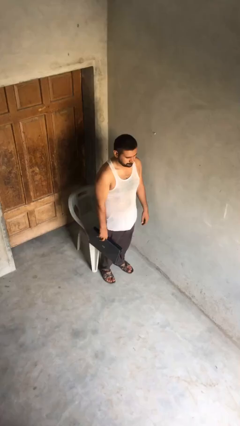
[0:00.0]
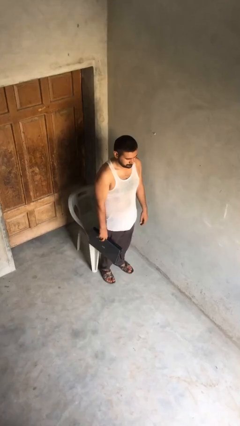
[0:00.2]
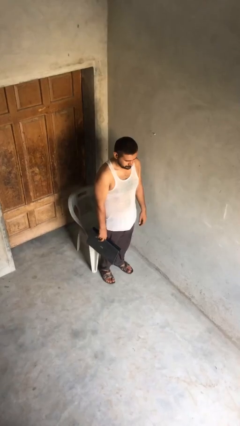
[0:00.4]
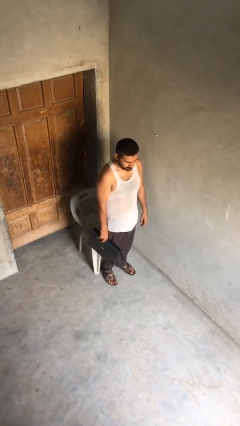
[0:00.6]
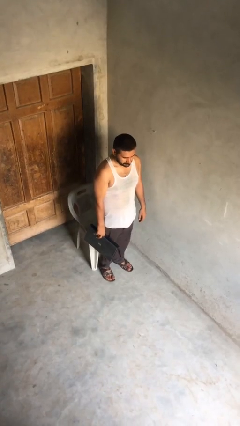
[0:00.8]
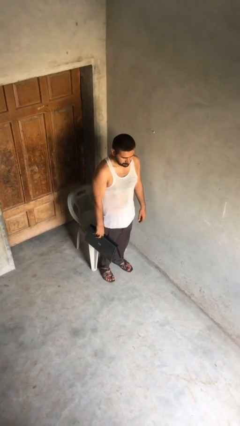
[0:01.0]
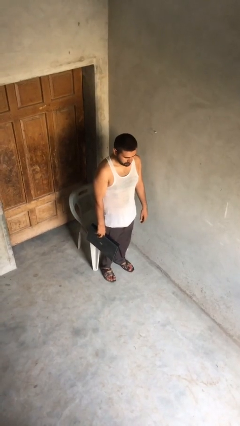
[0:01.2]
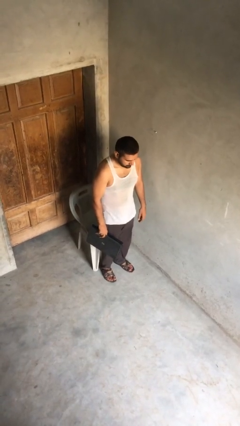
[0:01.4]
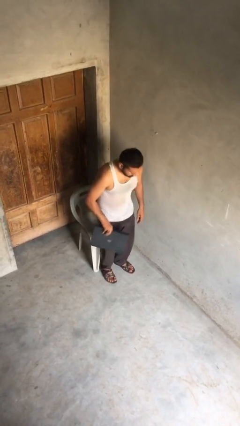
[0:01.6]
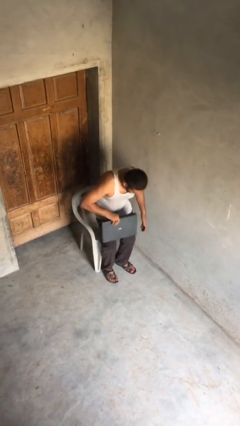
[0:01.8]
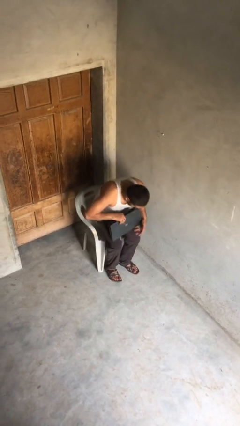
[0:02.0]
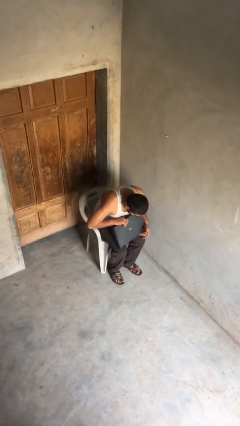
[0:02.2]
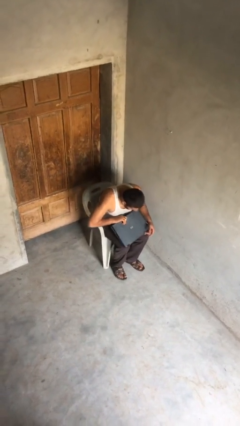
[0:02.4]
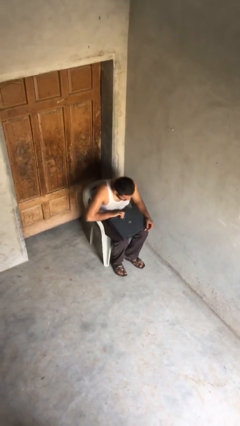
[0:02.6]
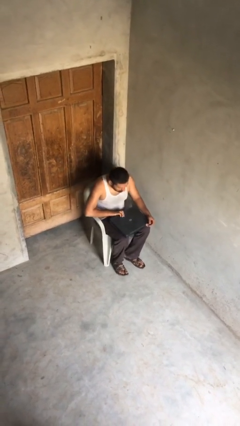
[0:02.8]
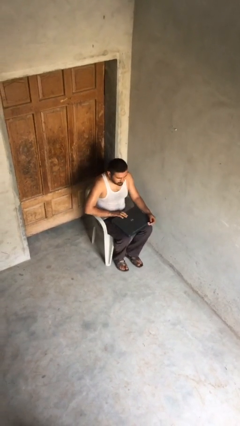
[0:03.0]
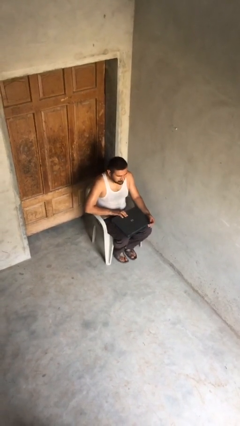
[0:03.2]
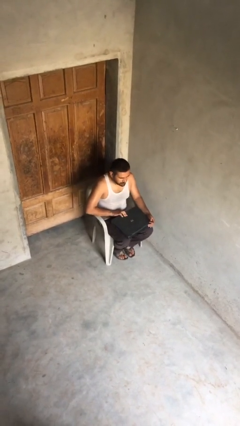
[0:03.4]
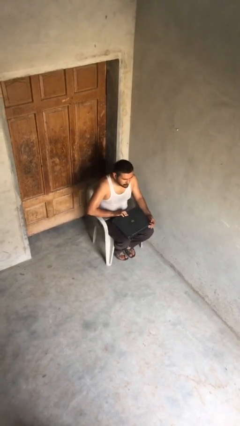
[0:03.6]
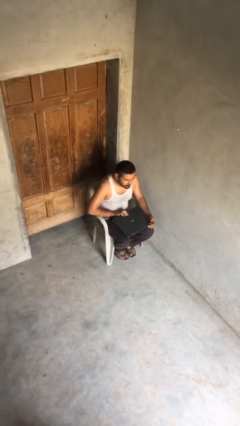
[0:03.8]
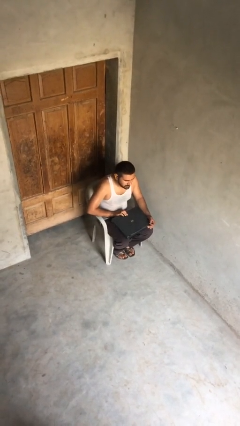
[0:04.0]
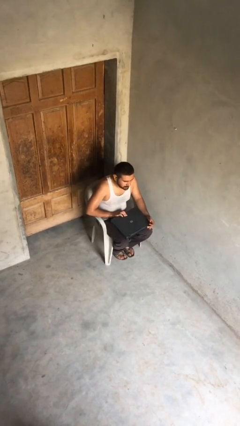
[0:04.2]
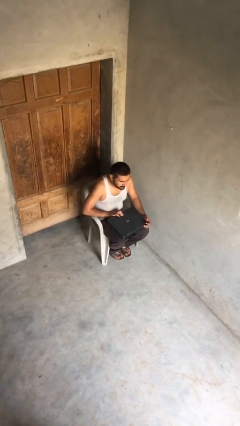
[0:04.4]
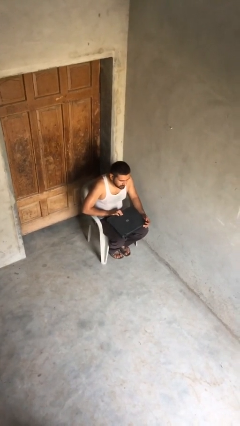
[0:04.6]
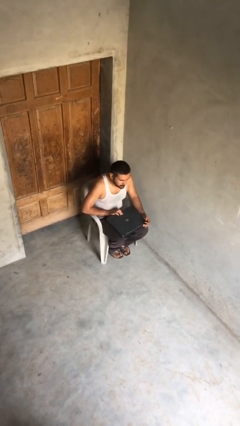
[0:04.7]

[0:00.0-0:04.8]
person sits down

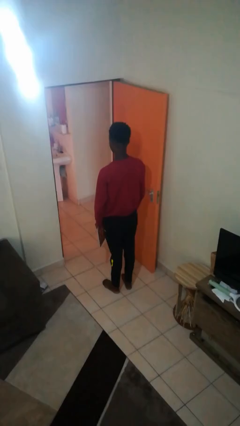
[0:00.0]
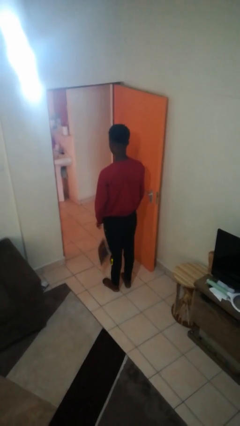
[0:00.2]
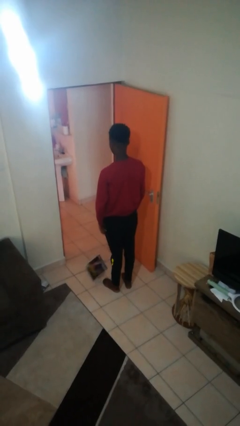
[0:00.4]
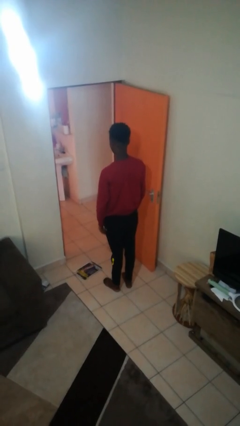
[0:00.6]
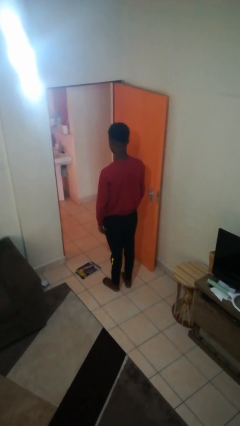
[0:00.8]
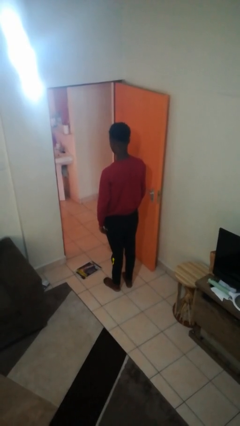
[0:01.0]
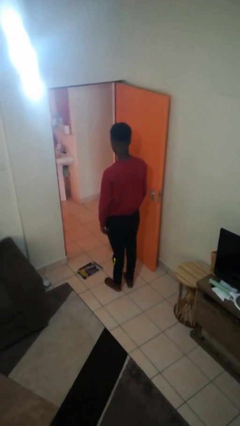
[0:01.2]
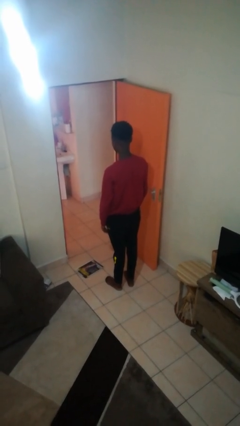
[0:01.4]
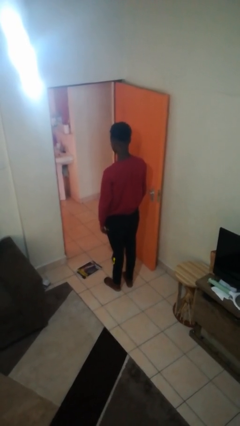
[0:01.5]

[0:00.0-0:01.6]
person drops object

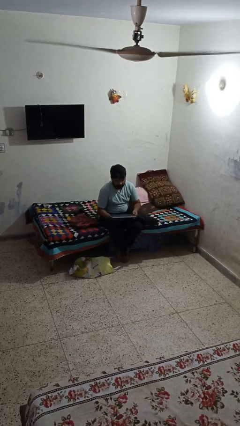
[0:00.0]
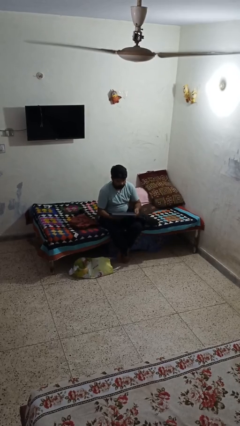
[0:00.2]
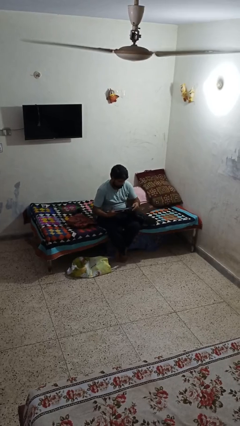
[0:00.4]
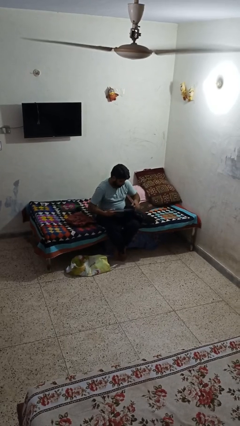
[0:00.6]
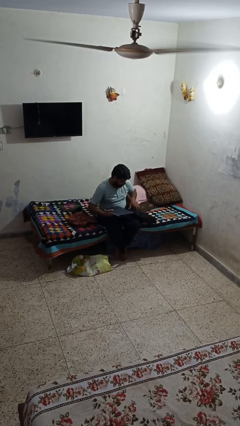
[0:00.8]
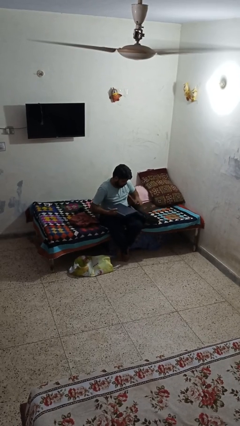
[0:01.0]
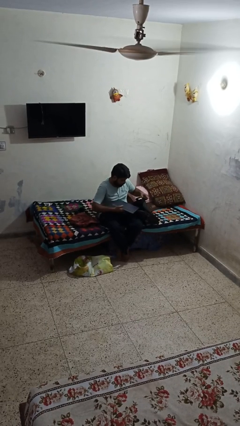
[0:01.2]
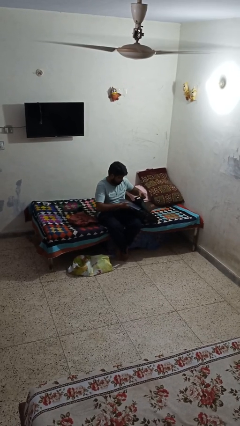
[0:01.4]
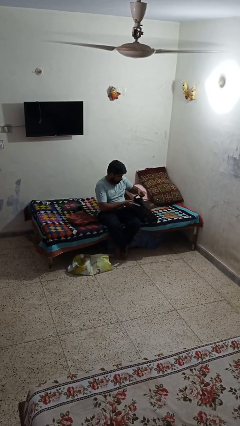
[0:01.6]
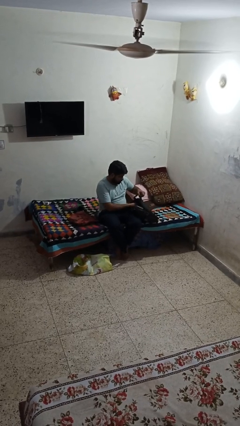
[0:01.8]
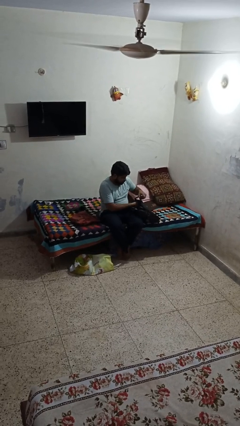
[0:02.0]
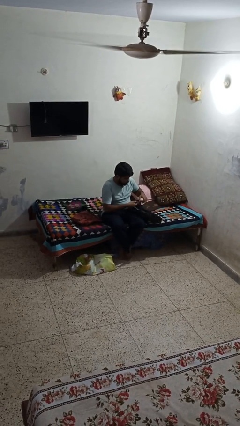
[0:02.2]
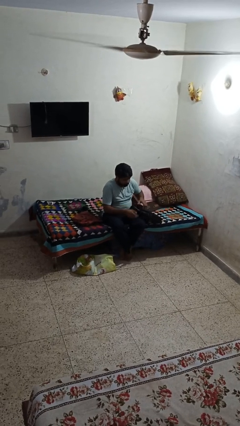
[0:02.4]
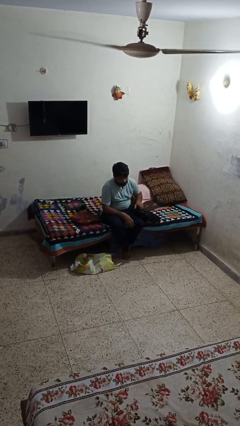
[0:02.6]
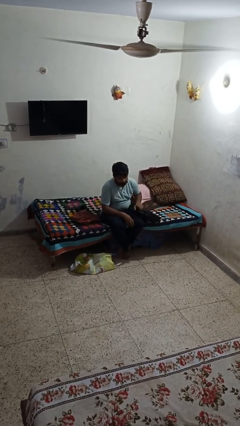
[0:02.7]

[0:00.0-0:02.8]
person puts object into backpack

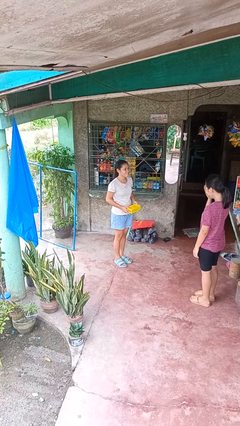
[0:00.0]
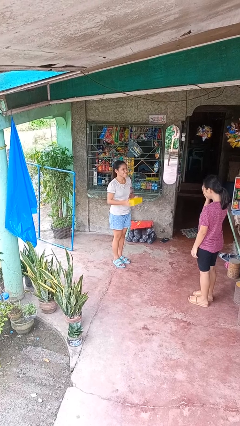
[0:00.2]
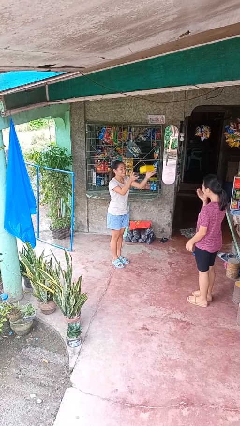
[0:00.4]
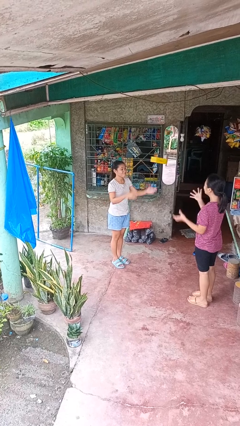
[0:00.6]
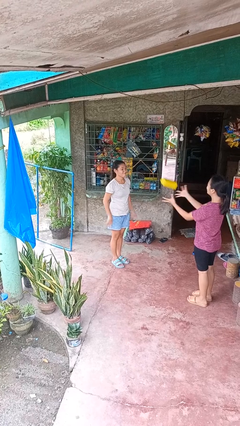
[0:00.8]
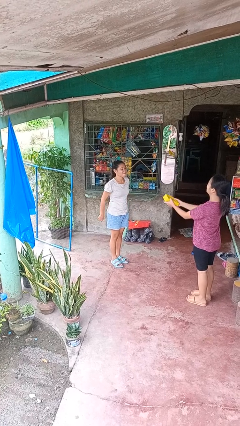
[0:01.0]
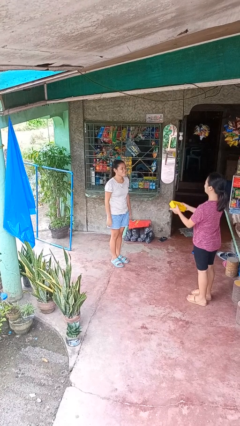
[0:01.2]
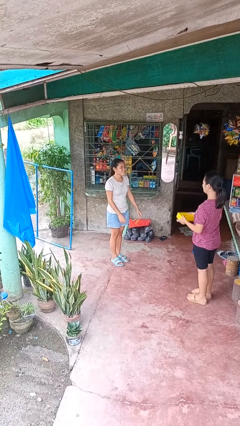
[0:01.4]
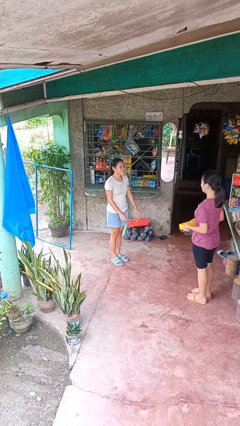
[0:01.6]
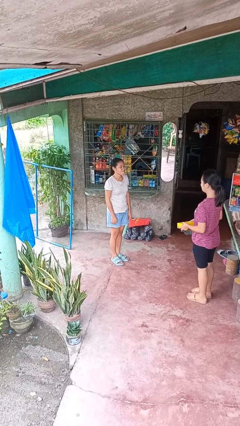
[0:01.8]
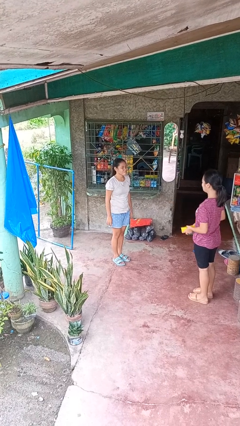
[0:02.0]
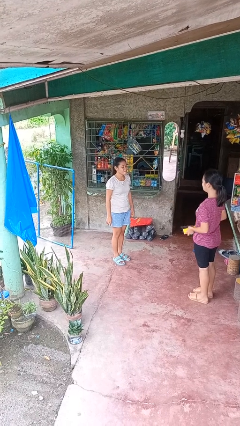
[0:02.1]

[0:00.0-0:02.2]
person throws object to person

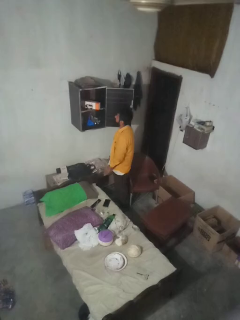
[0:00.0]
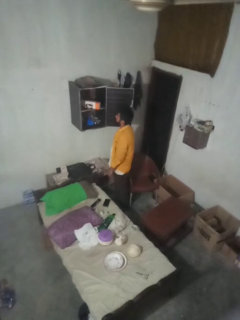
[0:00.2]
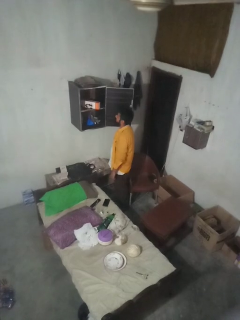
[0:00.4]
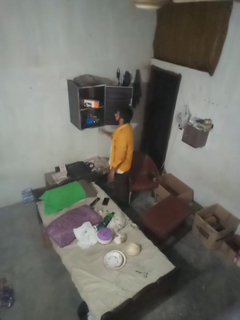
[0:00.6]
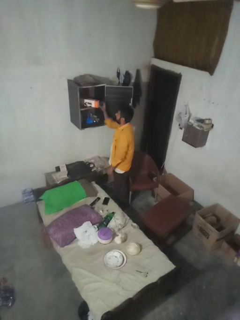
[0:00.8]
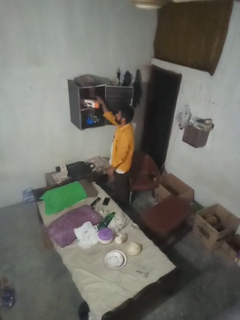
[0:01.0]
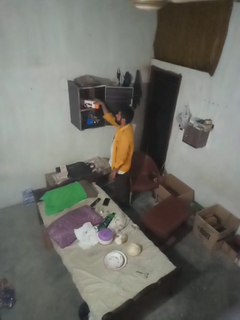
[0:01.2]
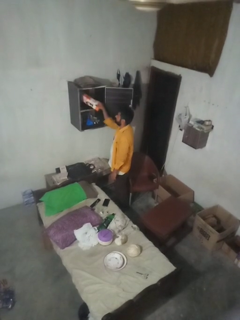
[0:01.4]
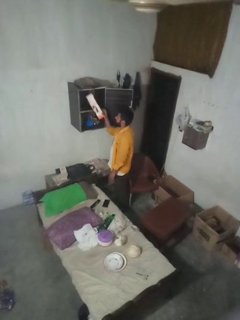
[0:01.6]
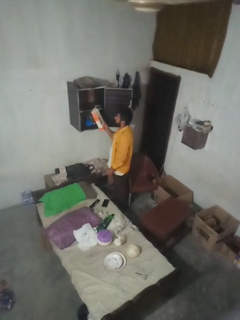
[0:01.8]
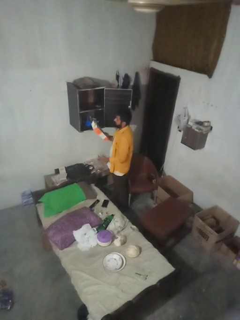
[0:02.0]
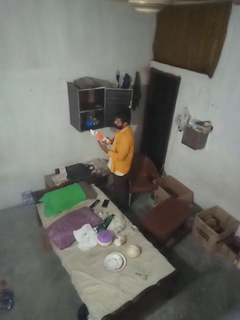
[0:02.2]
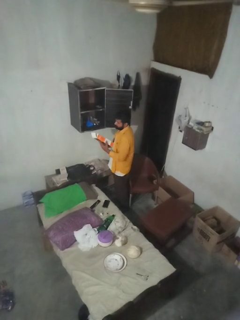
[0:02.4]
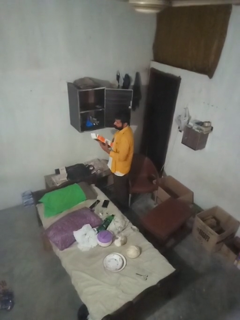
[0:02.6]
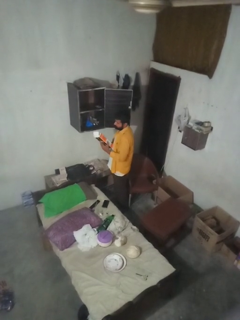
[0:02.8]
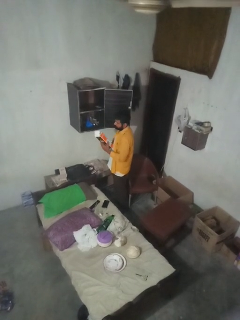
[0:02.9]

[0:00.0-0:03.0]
person picks up object from cabinet

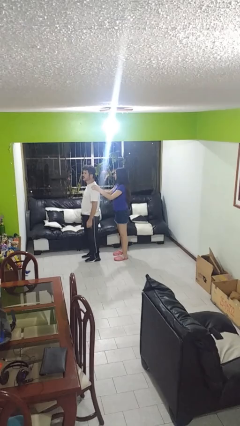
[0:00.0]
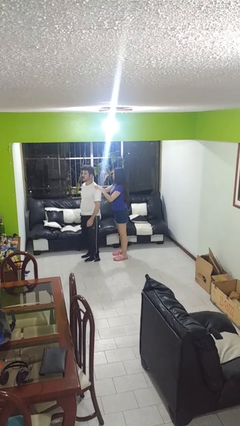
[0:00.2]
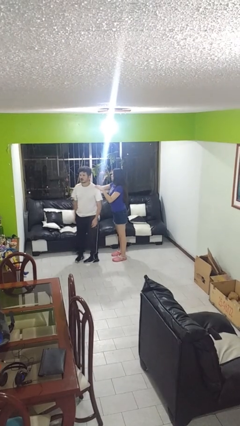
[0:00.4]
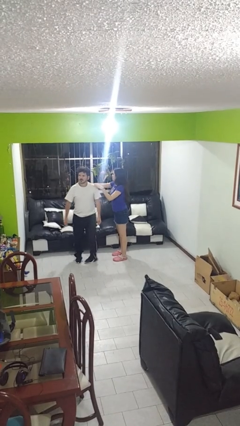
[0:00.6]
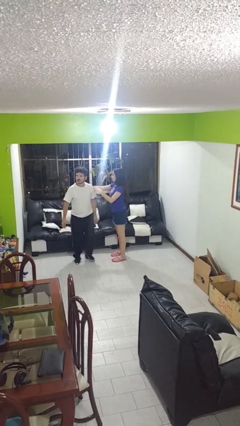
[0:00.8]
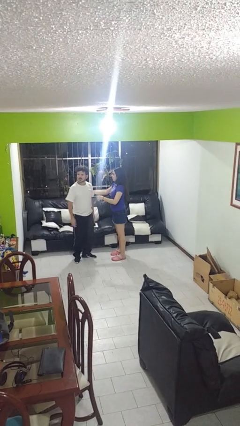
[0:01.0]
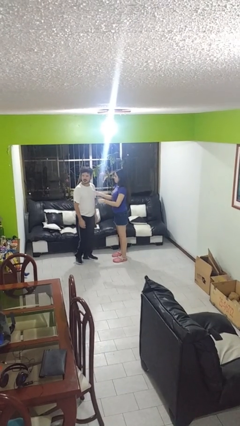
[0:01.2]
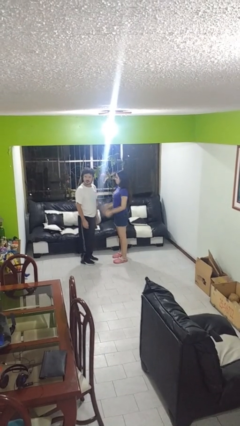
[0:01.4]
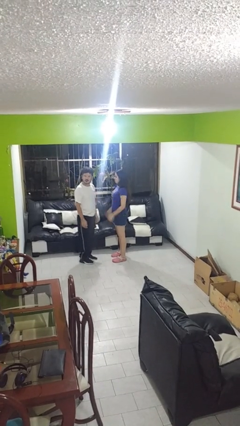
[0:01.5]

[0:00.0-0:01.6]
person spins person around

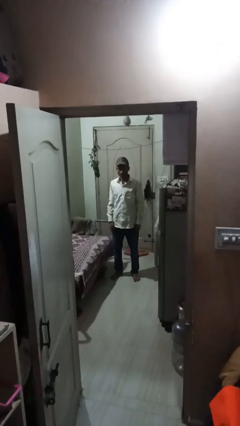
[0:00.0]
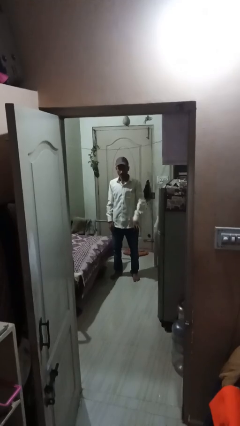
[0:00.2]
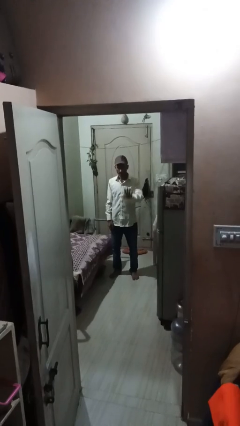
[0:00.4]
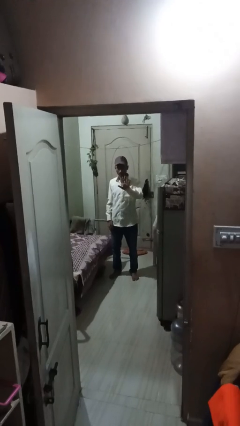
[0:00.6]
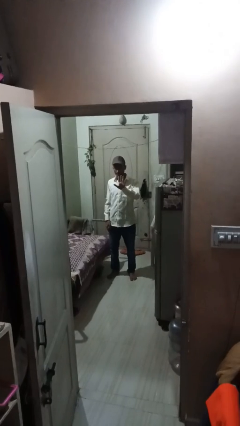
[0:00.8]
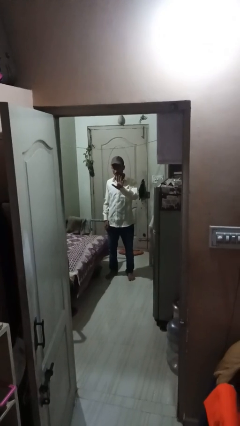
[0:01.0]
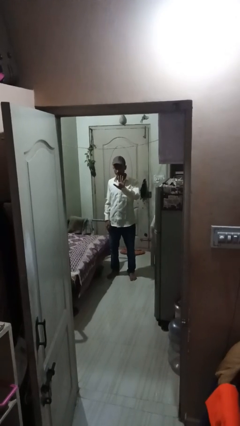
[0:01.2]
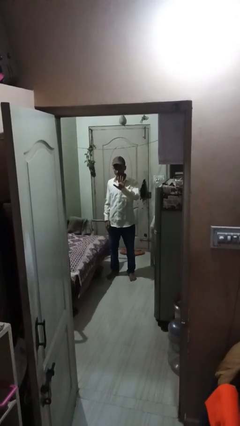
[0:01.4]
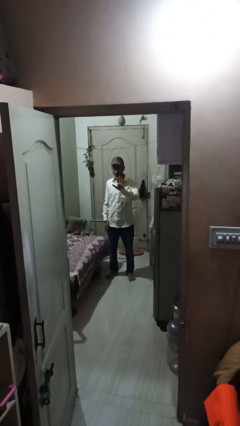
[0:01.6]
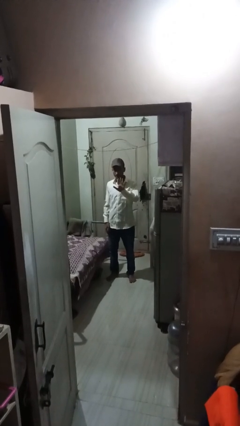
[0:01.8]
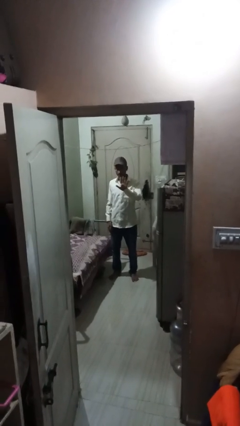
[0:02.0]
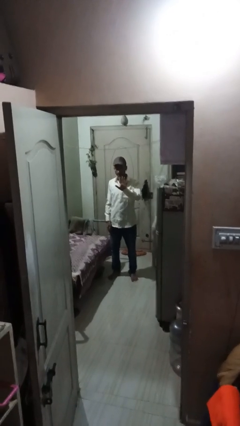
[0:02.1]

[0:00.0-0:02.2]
person gestures number five
